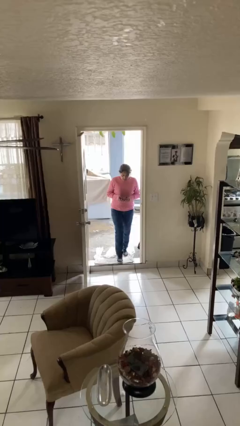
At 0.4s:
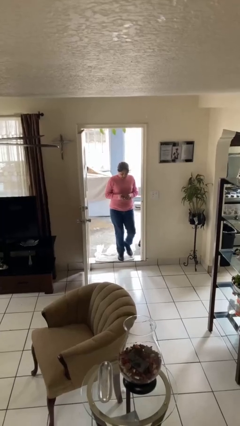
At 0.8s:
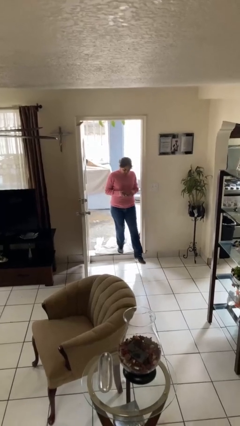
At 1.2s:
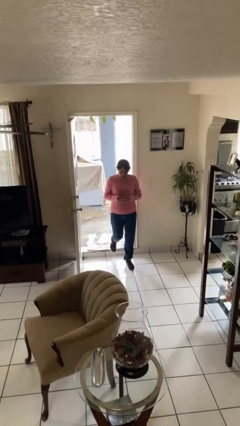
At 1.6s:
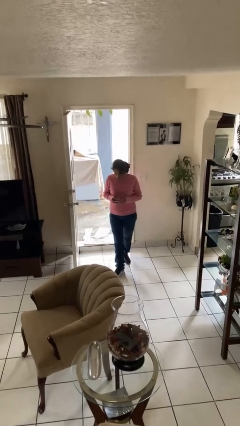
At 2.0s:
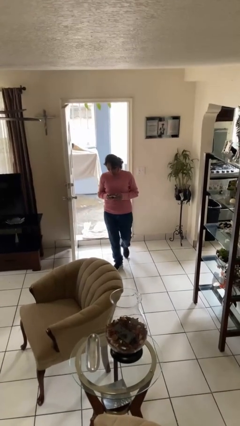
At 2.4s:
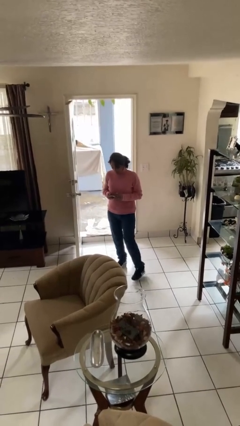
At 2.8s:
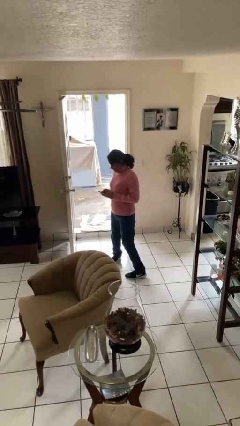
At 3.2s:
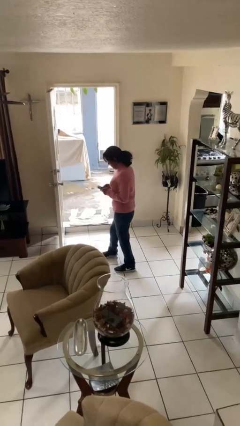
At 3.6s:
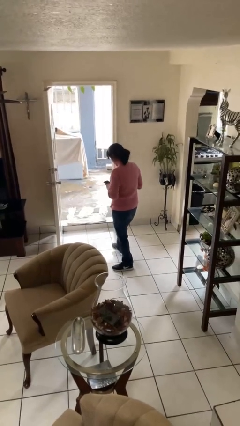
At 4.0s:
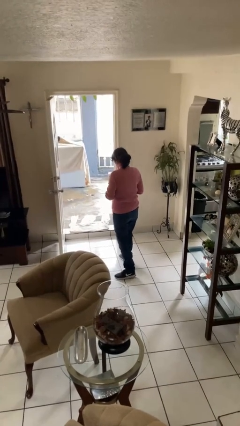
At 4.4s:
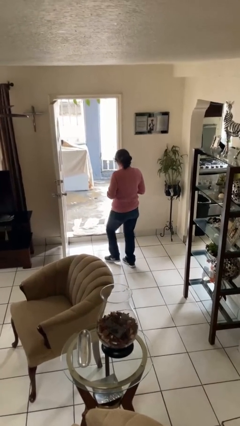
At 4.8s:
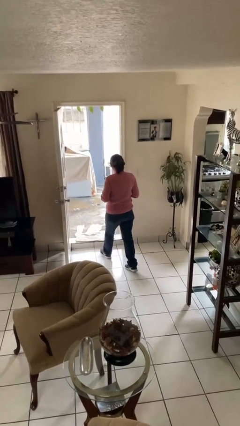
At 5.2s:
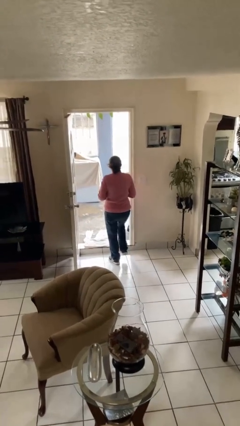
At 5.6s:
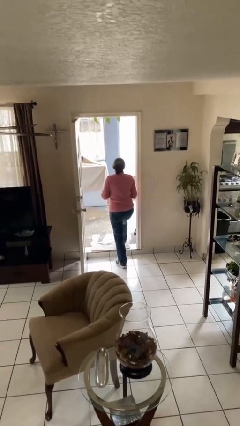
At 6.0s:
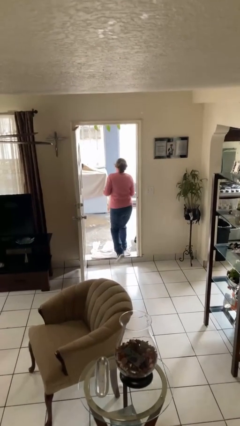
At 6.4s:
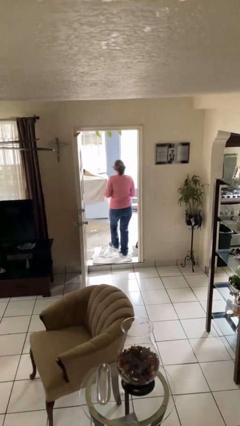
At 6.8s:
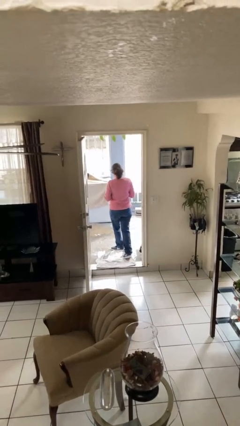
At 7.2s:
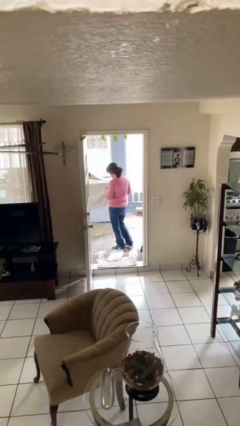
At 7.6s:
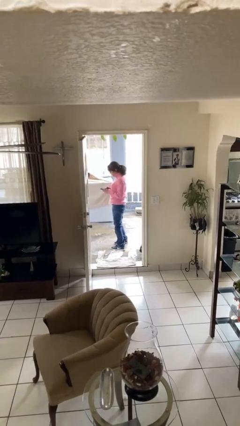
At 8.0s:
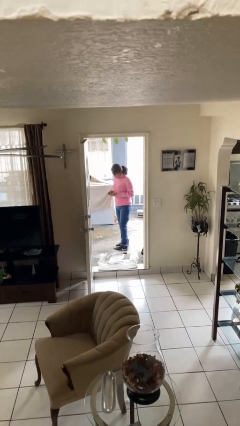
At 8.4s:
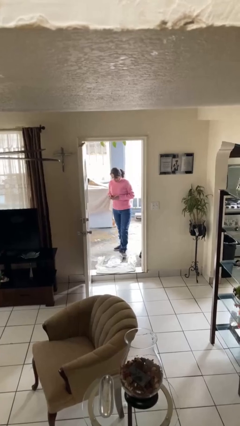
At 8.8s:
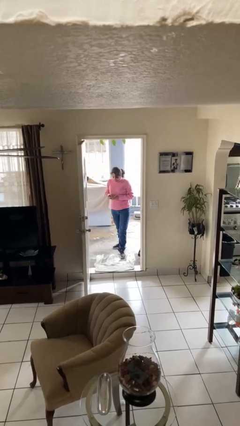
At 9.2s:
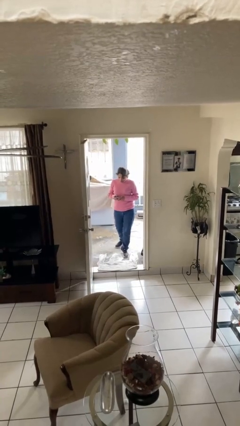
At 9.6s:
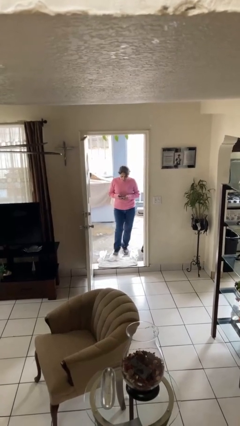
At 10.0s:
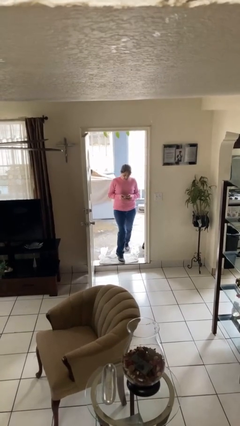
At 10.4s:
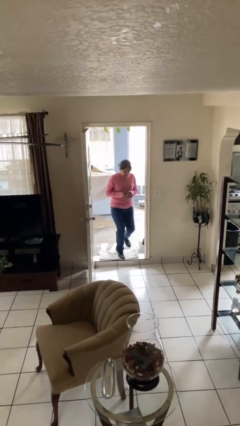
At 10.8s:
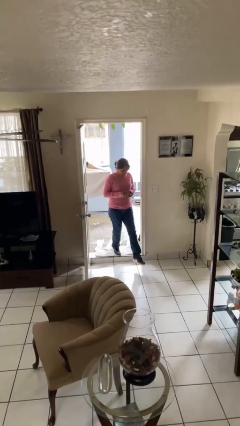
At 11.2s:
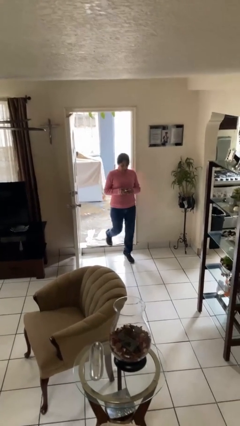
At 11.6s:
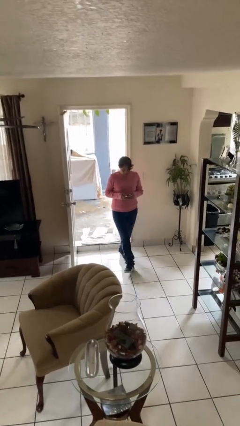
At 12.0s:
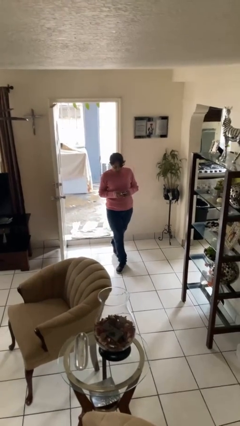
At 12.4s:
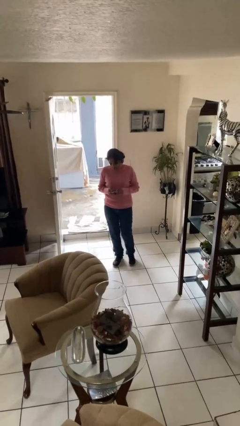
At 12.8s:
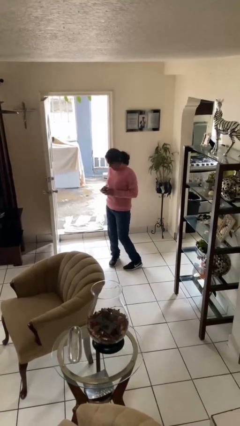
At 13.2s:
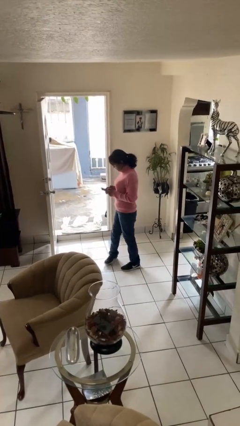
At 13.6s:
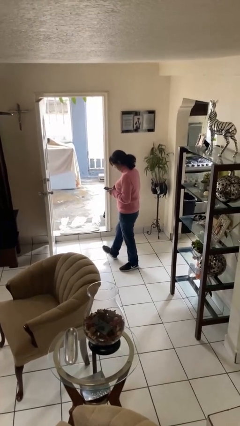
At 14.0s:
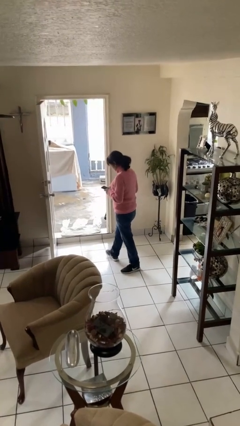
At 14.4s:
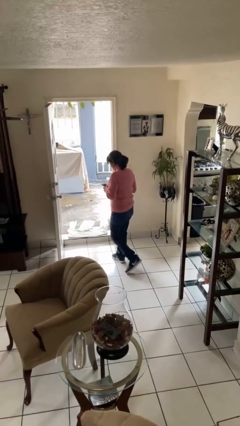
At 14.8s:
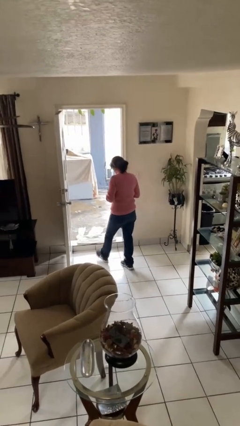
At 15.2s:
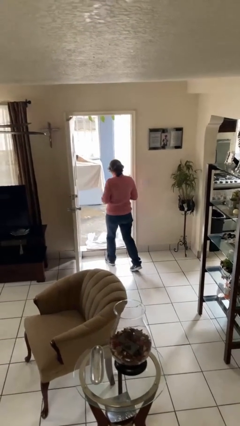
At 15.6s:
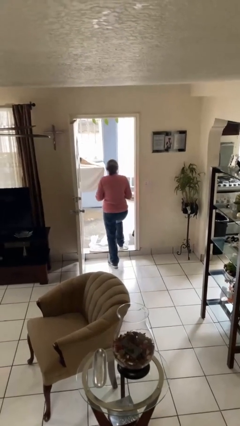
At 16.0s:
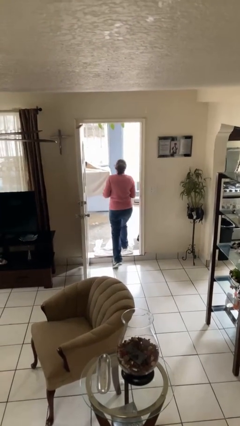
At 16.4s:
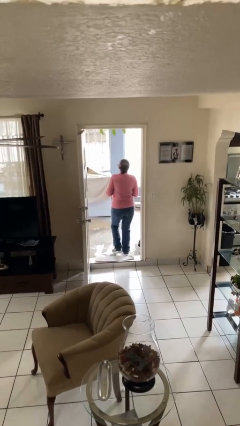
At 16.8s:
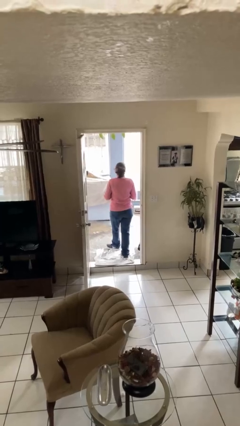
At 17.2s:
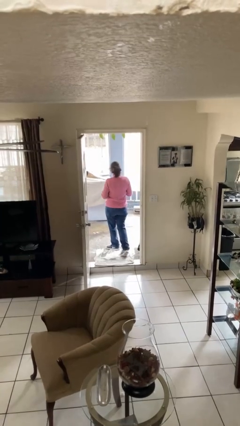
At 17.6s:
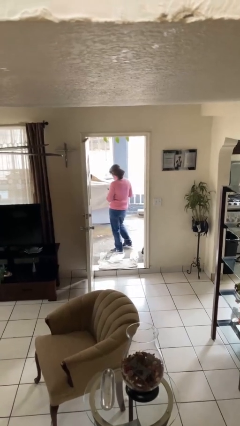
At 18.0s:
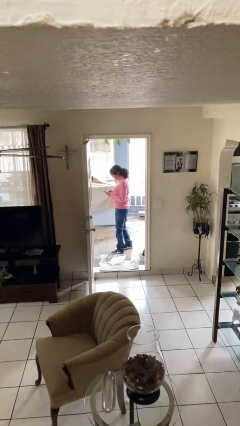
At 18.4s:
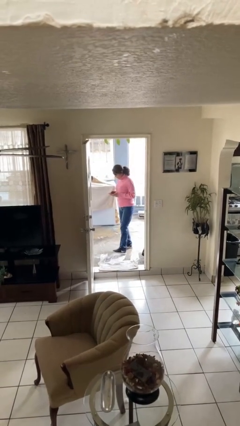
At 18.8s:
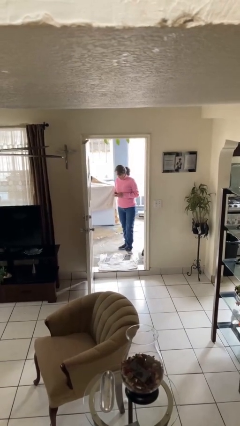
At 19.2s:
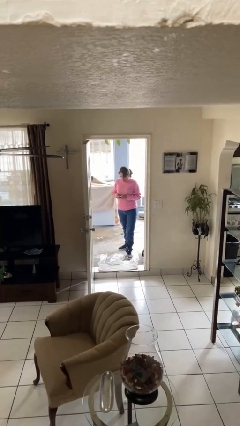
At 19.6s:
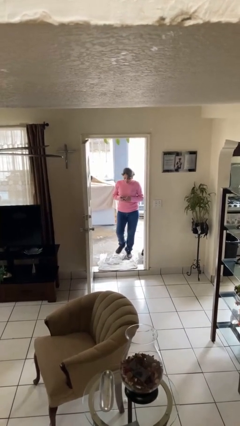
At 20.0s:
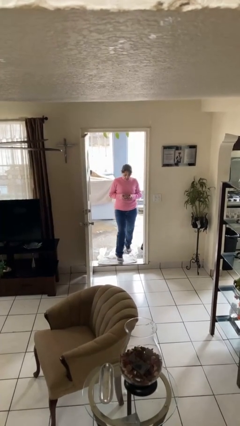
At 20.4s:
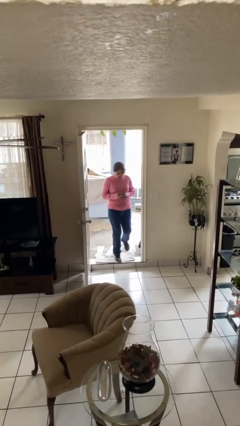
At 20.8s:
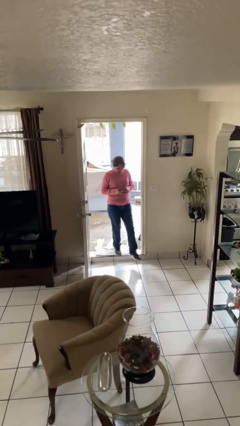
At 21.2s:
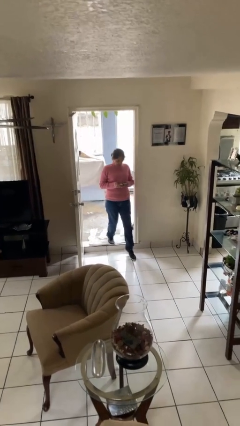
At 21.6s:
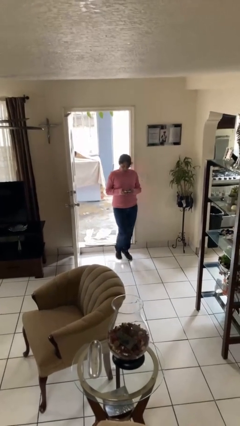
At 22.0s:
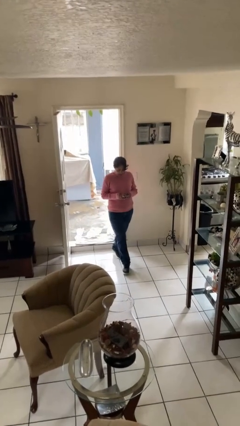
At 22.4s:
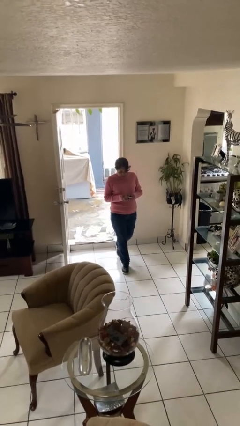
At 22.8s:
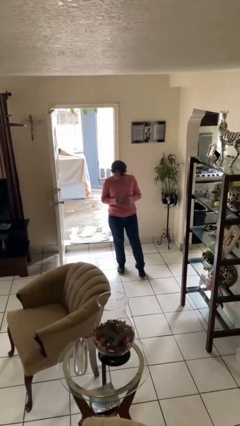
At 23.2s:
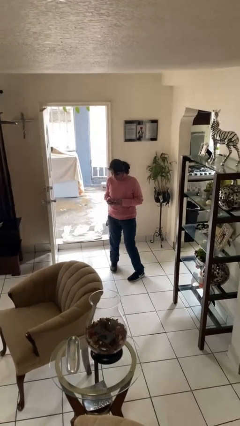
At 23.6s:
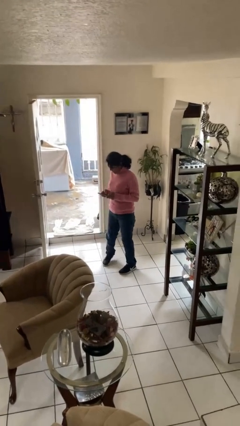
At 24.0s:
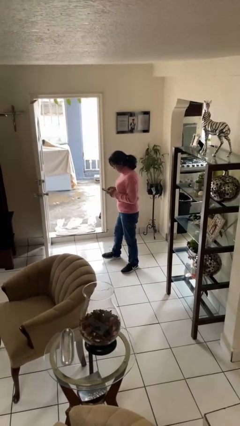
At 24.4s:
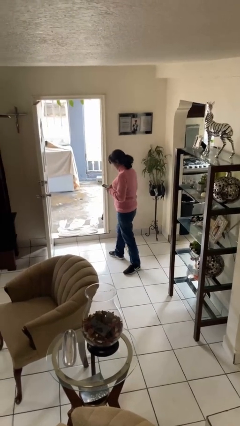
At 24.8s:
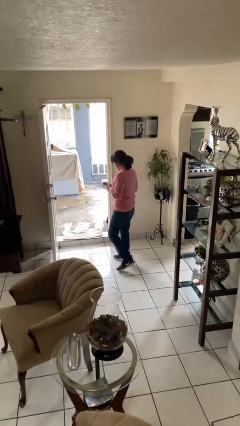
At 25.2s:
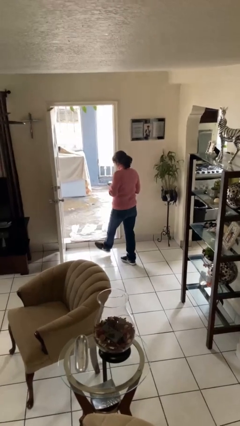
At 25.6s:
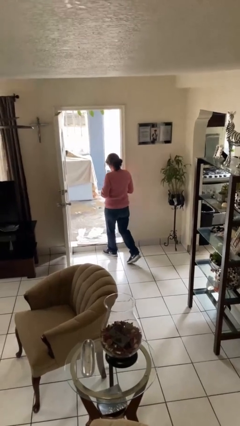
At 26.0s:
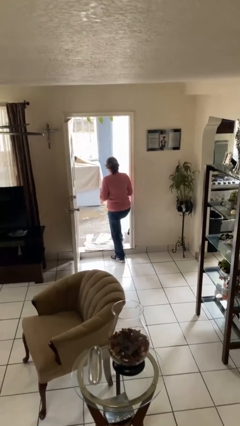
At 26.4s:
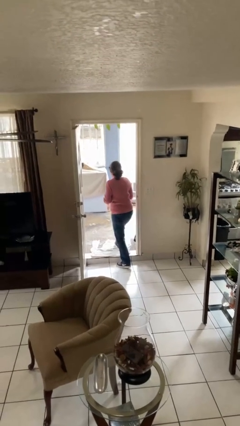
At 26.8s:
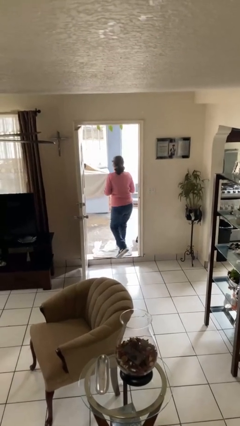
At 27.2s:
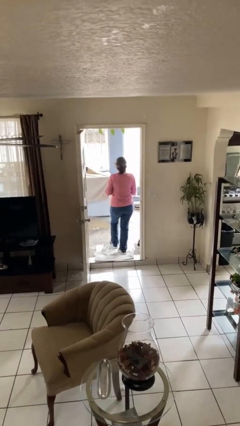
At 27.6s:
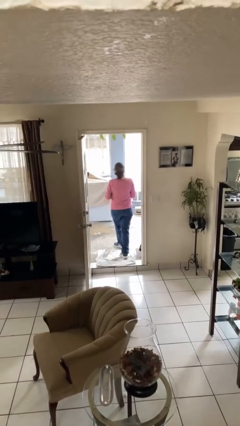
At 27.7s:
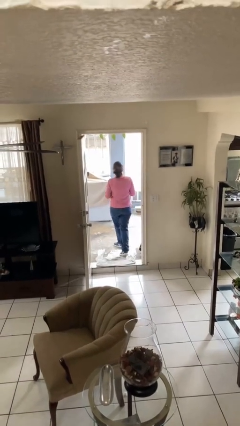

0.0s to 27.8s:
person texts on phone

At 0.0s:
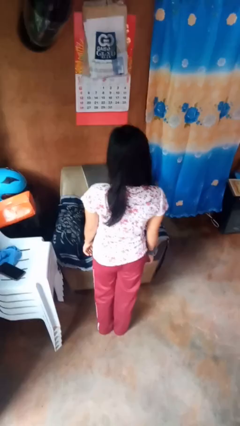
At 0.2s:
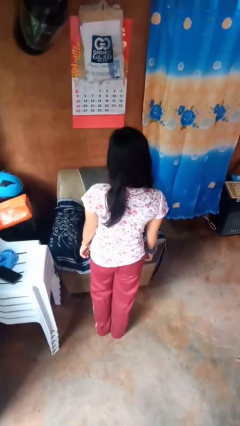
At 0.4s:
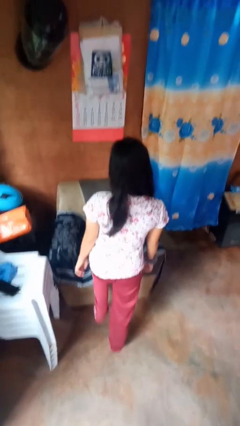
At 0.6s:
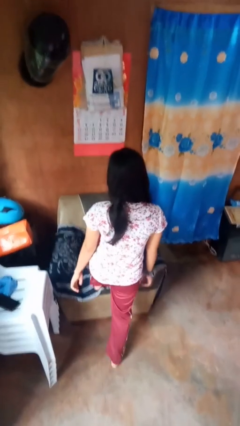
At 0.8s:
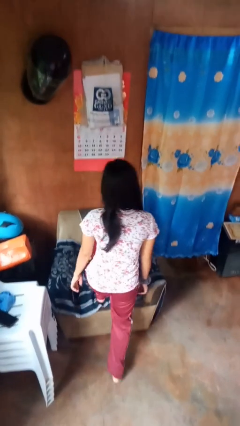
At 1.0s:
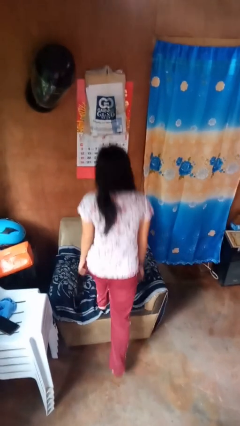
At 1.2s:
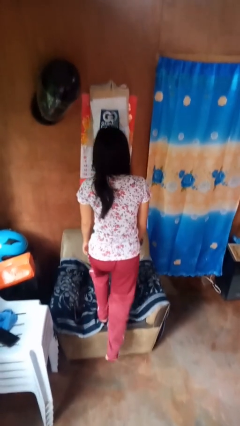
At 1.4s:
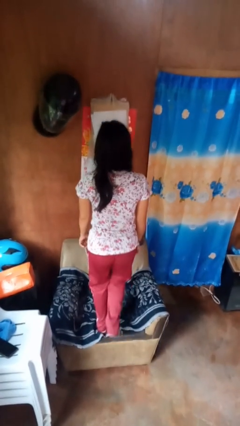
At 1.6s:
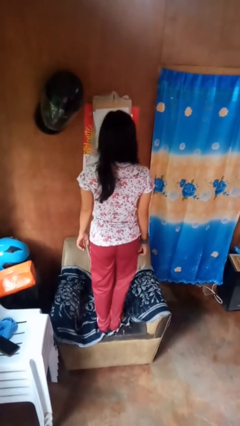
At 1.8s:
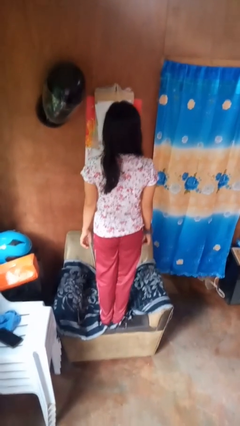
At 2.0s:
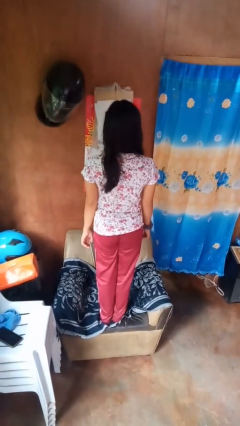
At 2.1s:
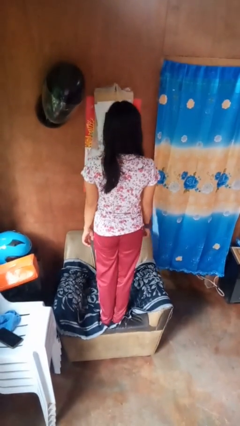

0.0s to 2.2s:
person climbs on couch

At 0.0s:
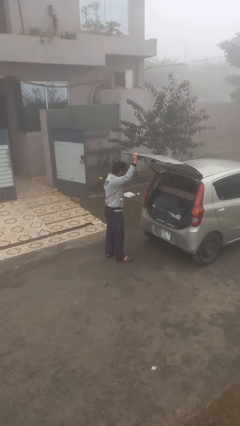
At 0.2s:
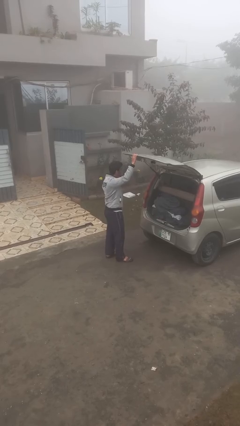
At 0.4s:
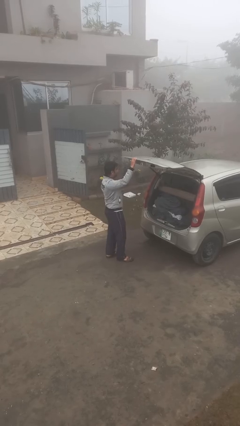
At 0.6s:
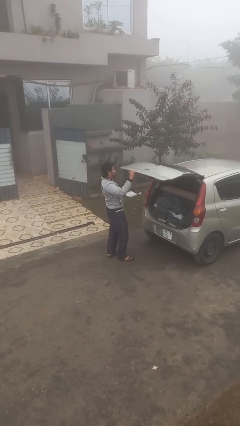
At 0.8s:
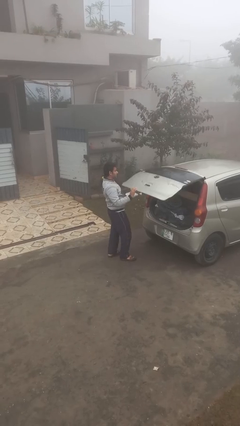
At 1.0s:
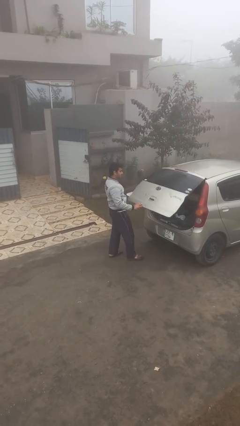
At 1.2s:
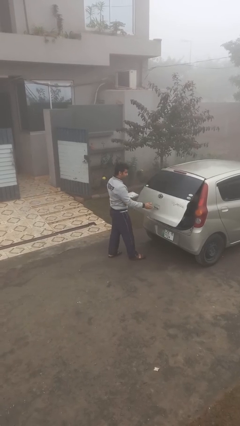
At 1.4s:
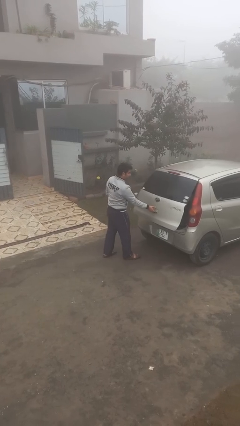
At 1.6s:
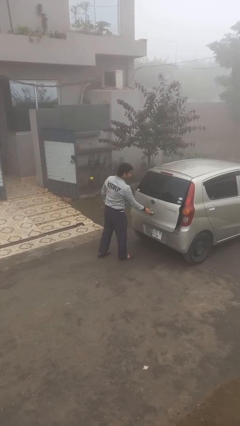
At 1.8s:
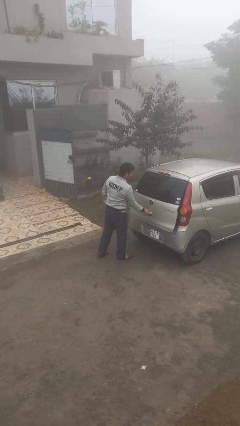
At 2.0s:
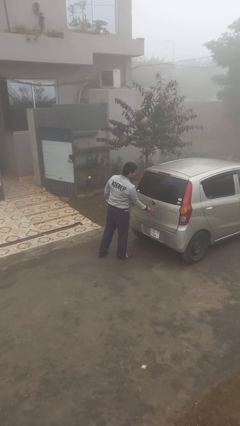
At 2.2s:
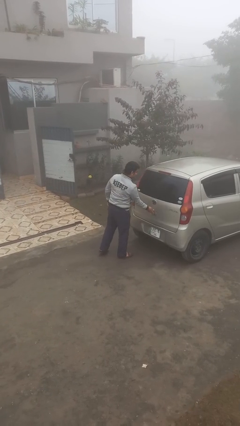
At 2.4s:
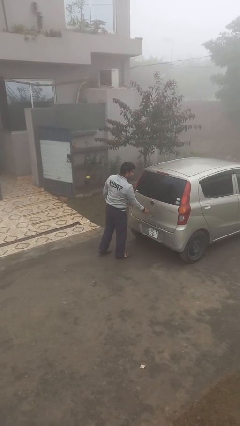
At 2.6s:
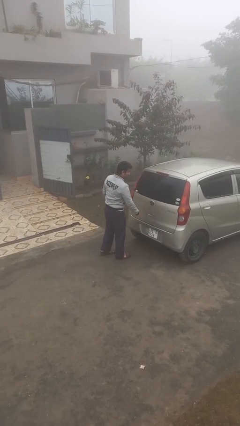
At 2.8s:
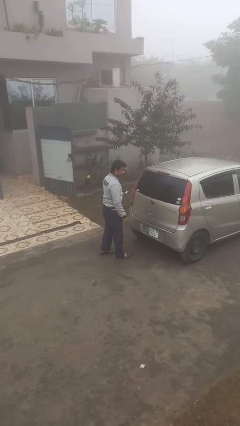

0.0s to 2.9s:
person closes car trunk
